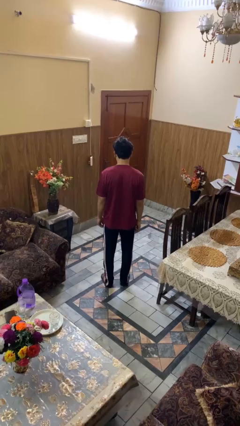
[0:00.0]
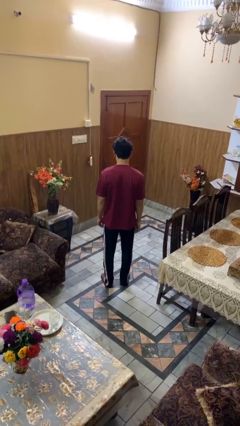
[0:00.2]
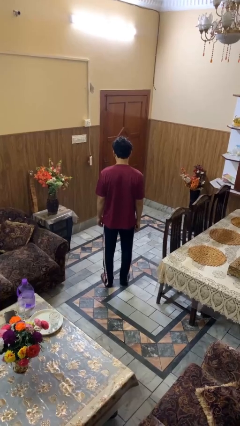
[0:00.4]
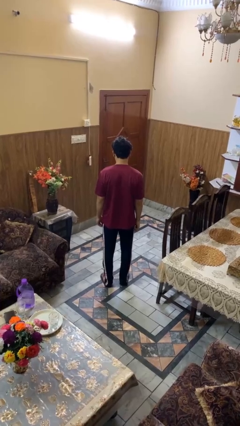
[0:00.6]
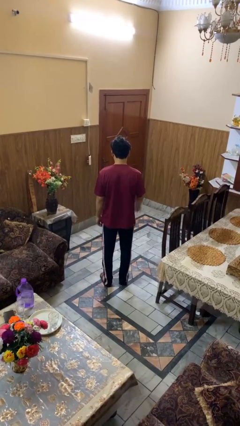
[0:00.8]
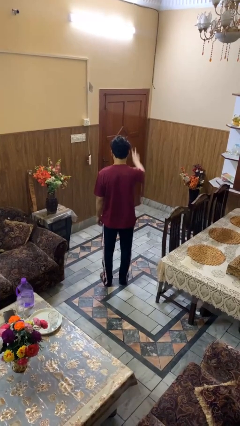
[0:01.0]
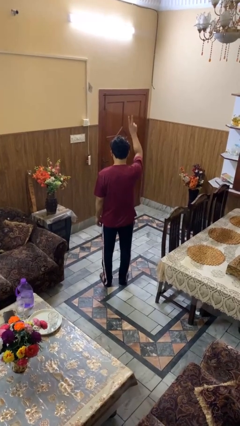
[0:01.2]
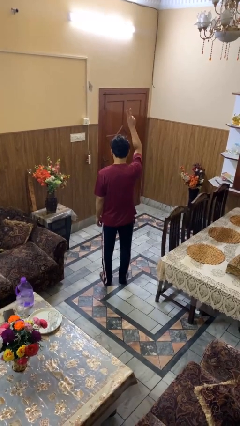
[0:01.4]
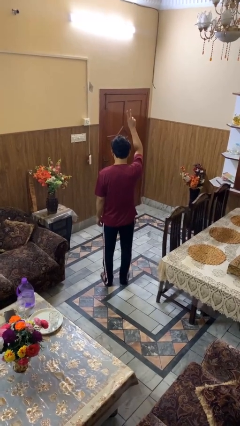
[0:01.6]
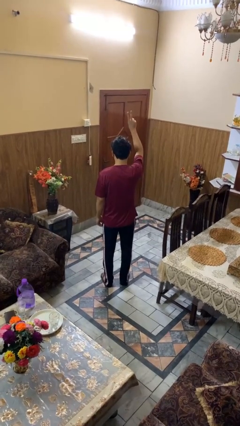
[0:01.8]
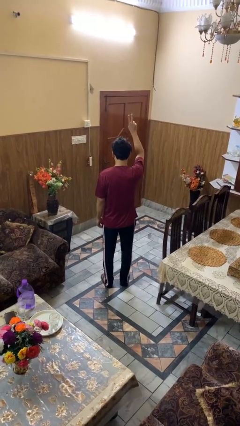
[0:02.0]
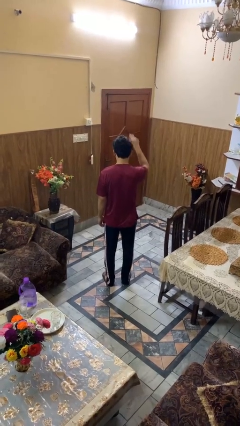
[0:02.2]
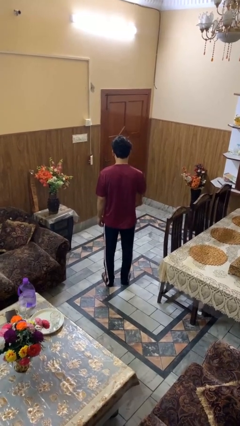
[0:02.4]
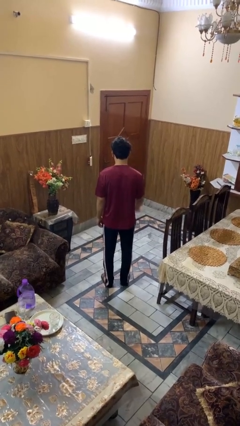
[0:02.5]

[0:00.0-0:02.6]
person gestures peace

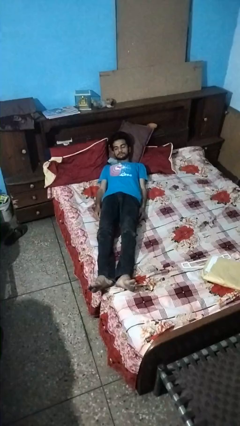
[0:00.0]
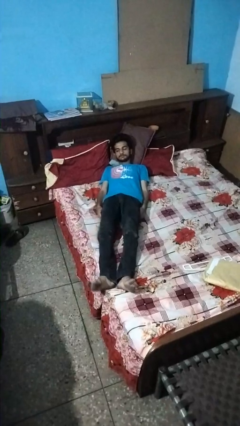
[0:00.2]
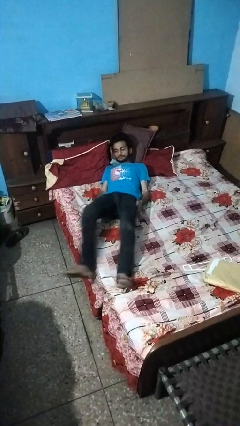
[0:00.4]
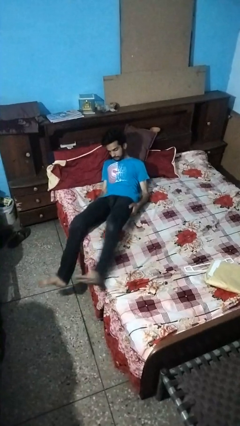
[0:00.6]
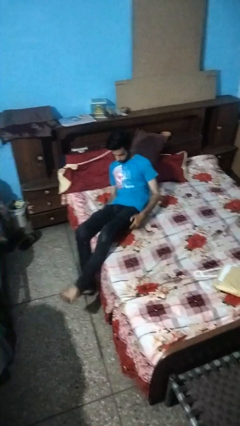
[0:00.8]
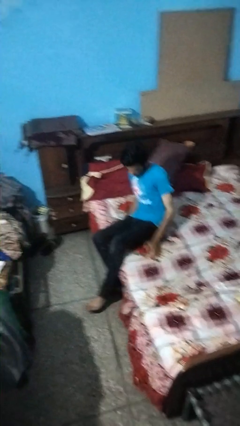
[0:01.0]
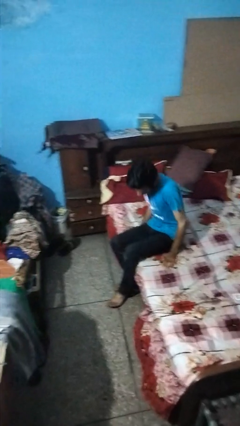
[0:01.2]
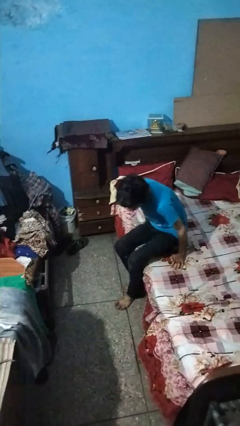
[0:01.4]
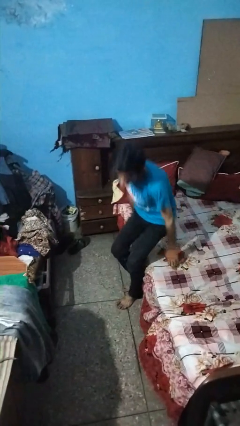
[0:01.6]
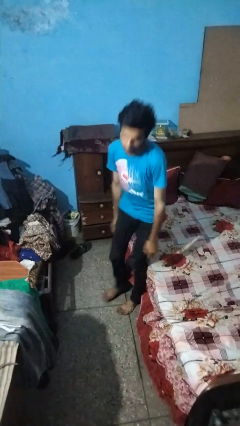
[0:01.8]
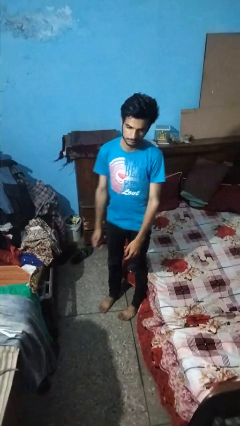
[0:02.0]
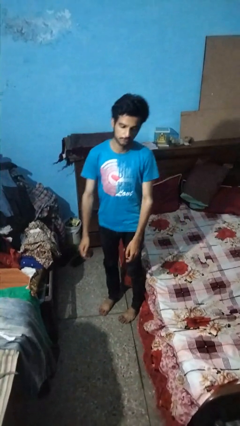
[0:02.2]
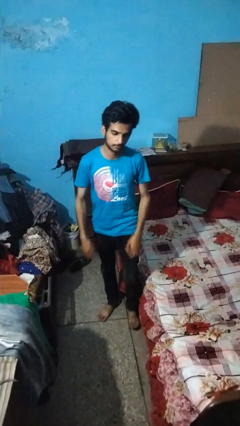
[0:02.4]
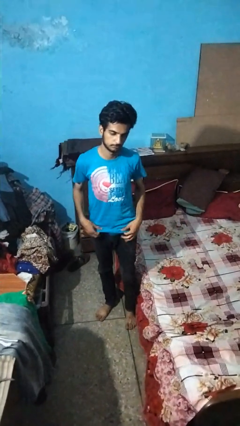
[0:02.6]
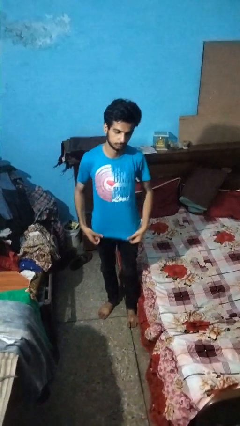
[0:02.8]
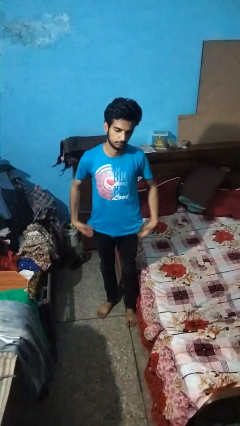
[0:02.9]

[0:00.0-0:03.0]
person stands up

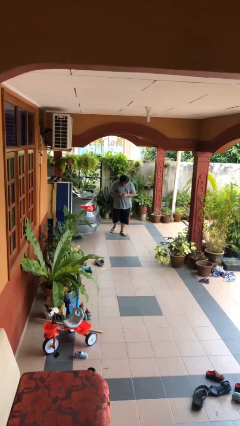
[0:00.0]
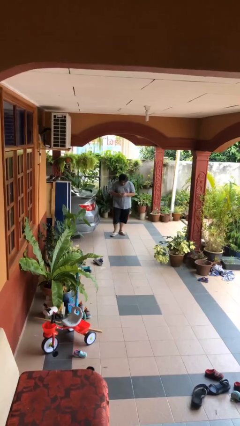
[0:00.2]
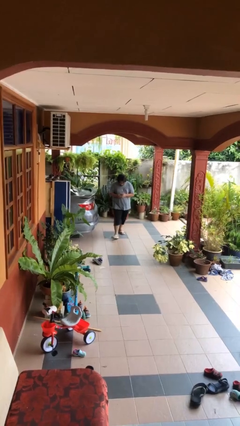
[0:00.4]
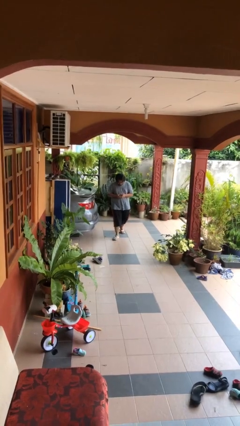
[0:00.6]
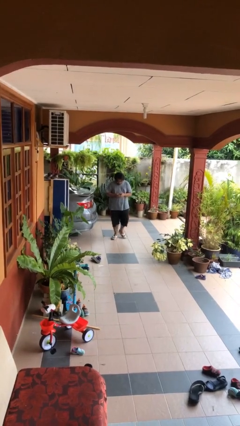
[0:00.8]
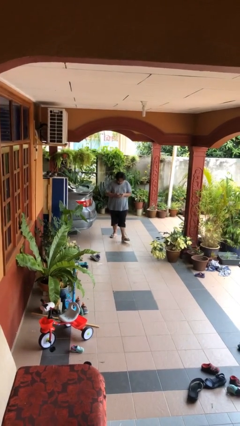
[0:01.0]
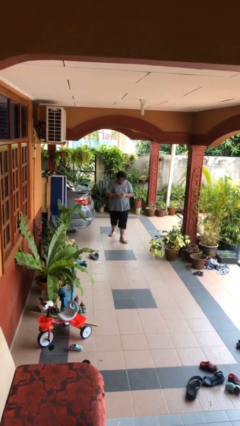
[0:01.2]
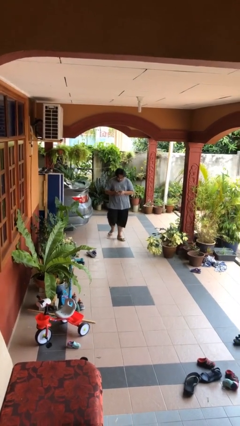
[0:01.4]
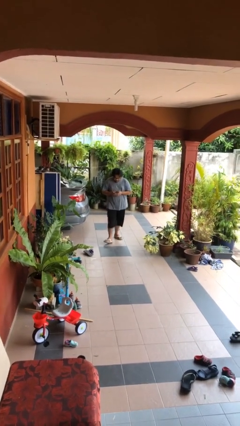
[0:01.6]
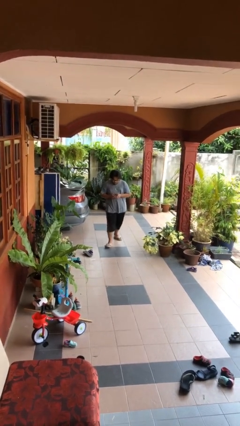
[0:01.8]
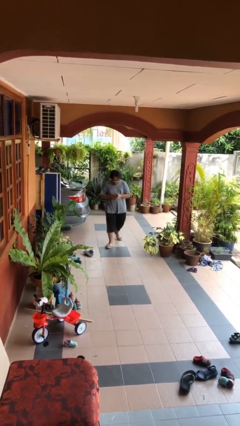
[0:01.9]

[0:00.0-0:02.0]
person texts on phone

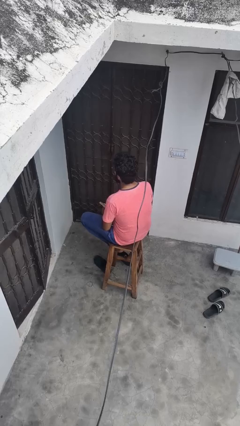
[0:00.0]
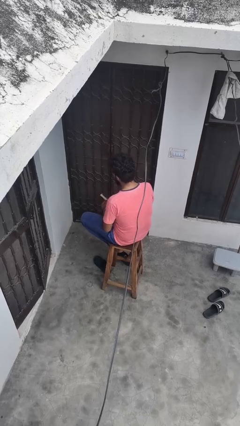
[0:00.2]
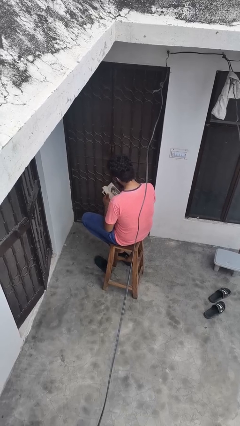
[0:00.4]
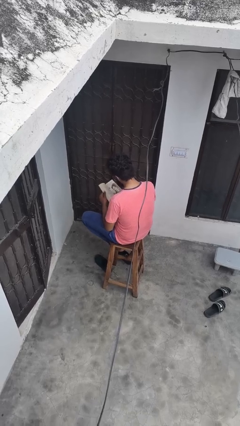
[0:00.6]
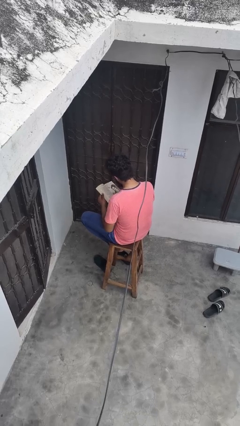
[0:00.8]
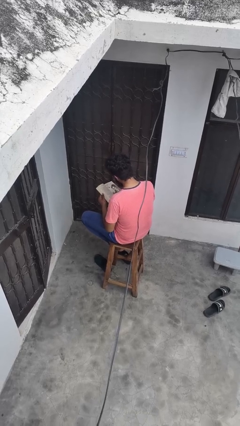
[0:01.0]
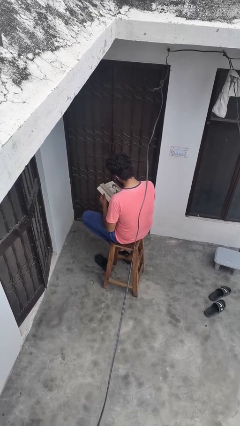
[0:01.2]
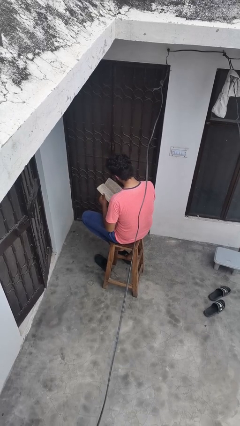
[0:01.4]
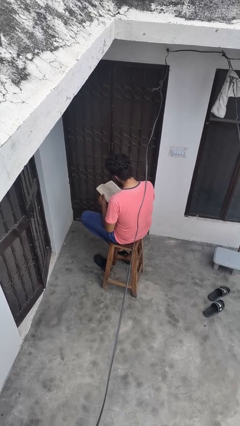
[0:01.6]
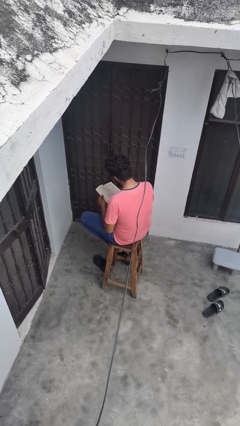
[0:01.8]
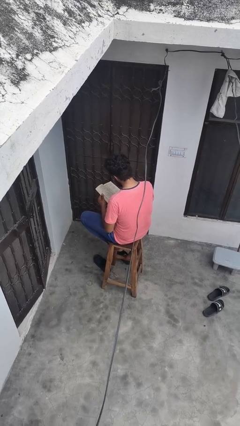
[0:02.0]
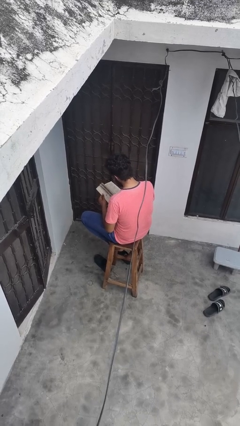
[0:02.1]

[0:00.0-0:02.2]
person reads book

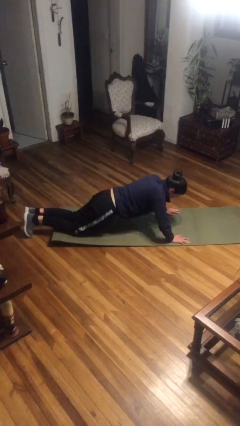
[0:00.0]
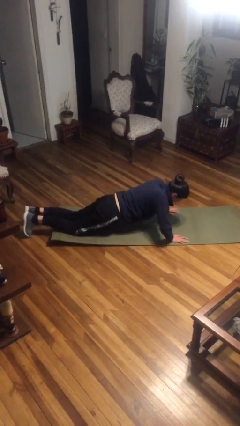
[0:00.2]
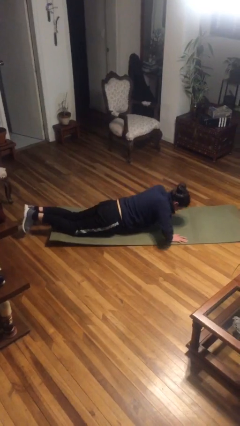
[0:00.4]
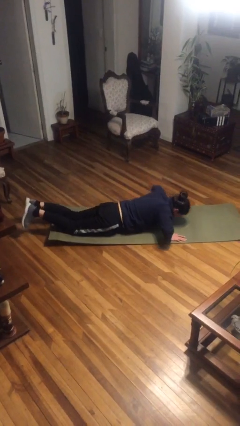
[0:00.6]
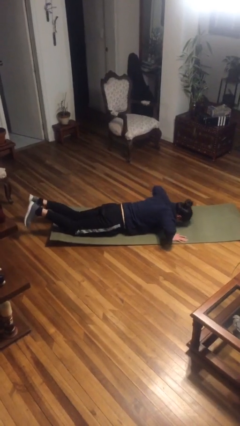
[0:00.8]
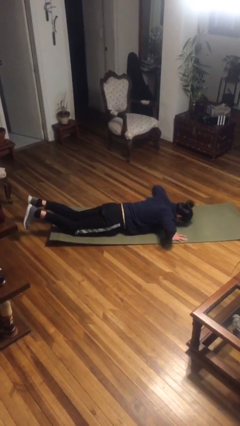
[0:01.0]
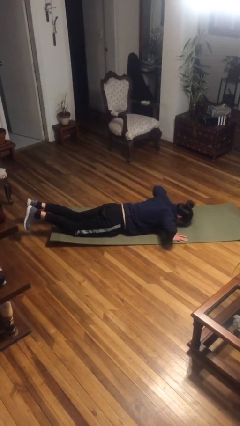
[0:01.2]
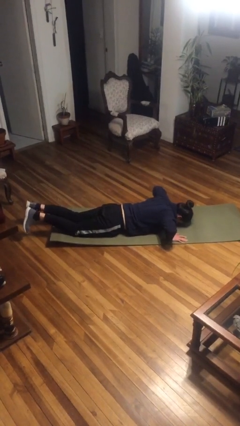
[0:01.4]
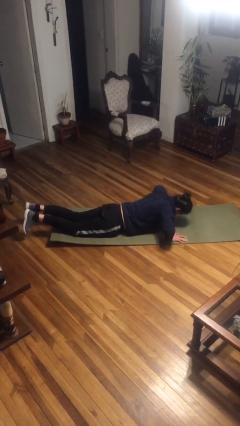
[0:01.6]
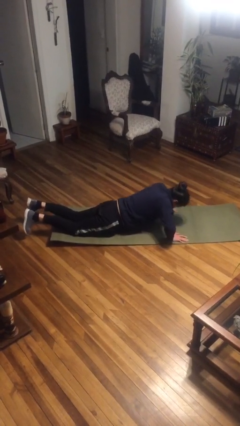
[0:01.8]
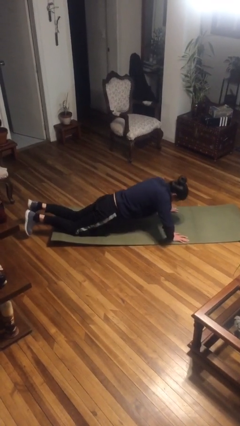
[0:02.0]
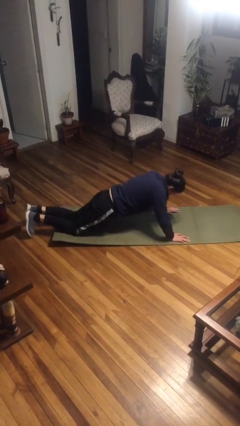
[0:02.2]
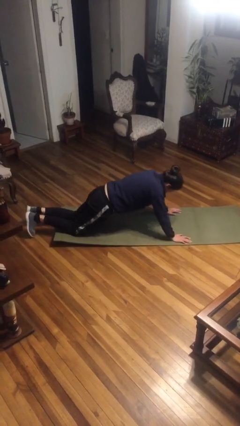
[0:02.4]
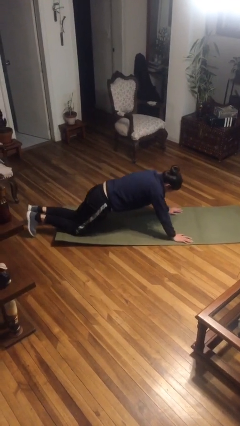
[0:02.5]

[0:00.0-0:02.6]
person exercises with pushup

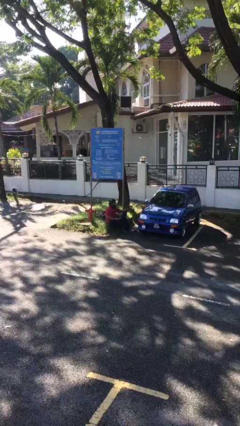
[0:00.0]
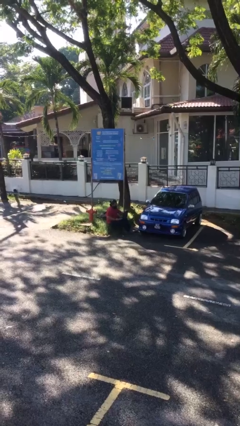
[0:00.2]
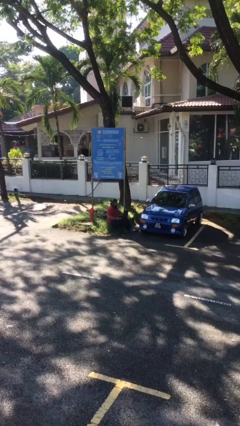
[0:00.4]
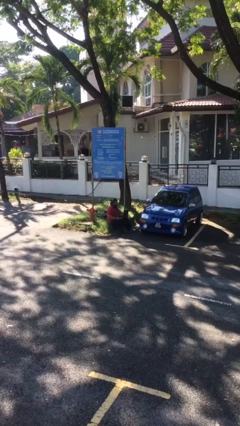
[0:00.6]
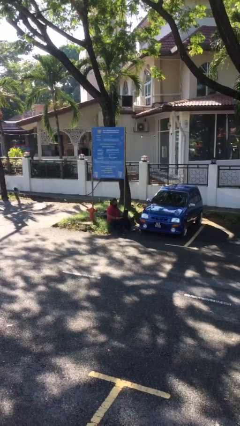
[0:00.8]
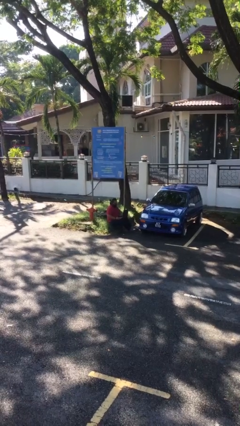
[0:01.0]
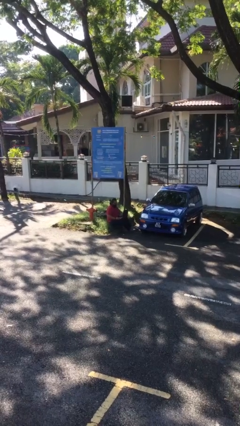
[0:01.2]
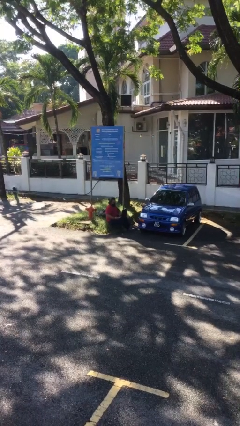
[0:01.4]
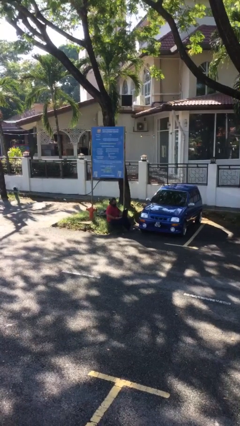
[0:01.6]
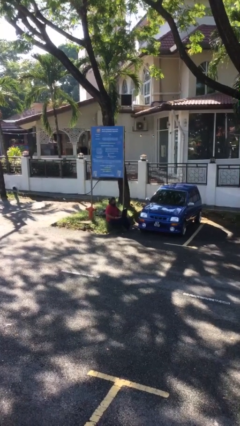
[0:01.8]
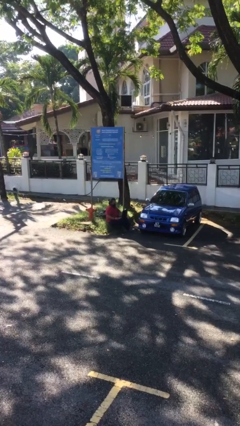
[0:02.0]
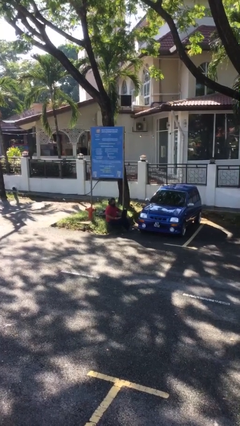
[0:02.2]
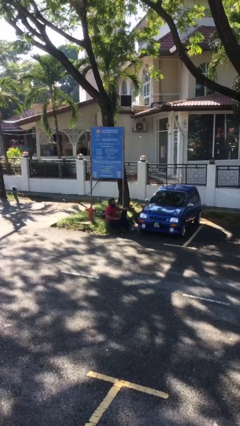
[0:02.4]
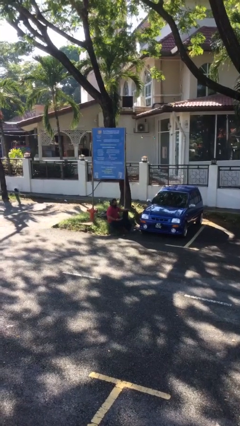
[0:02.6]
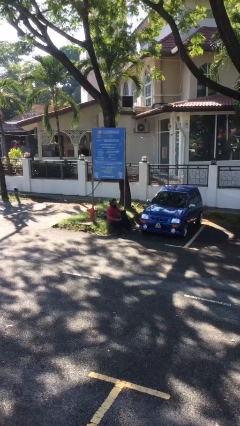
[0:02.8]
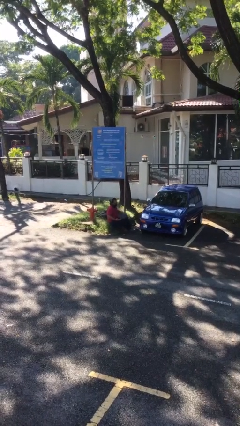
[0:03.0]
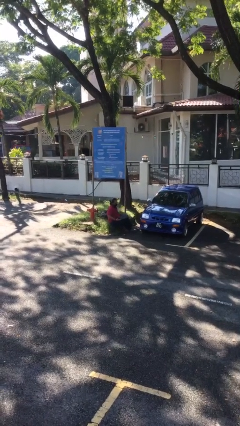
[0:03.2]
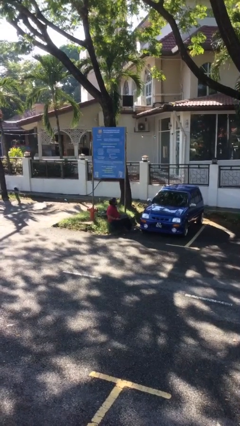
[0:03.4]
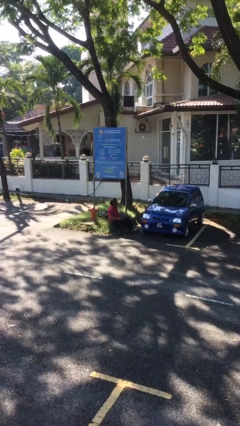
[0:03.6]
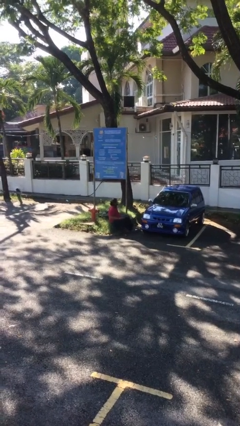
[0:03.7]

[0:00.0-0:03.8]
person interacts with laptop

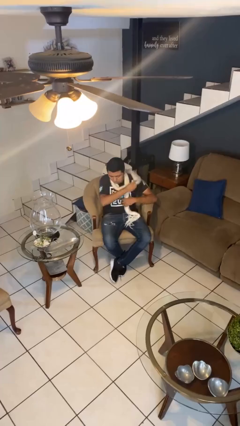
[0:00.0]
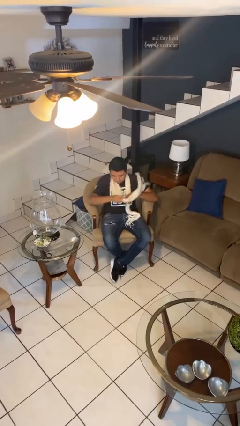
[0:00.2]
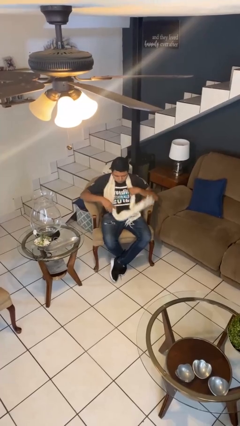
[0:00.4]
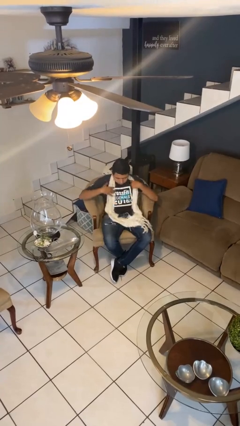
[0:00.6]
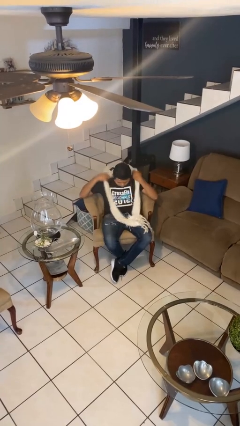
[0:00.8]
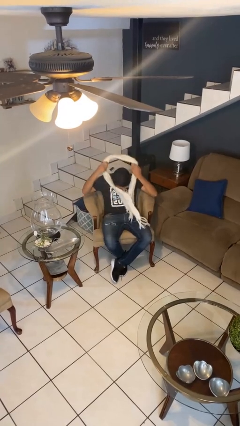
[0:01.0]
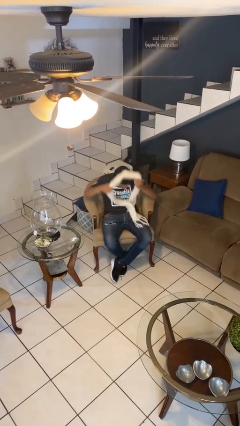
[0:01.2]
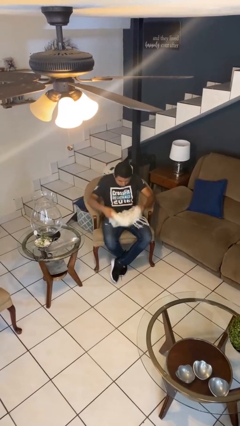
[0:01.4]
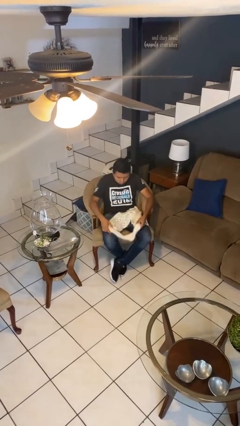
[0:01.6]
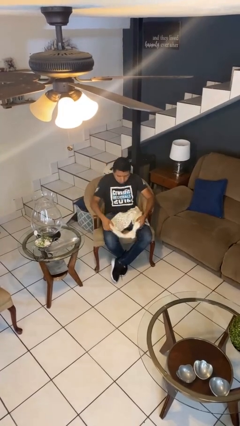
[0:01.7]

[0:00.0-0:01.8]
person takes off scarf
